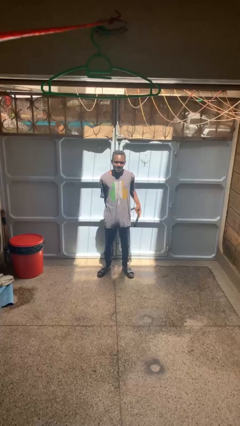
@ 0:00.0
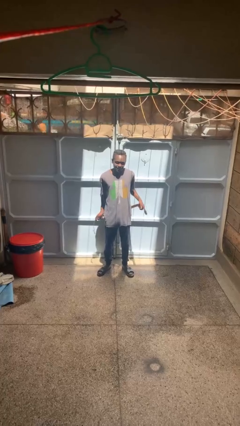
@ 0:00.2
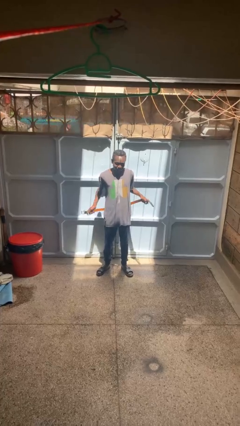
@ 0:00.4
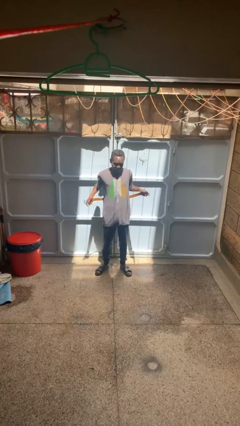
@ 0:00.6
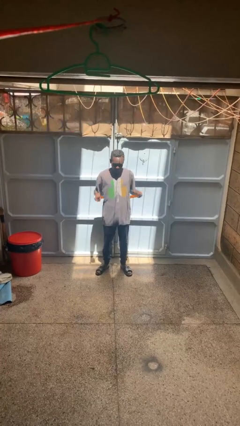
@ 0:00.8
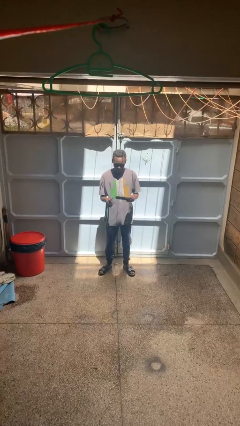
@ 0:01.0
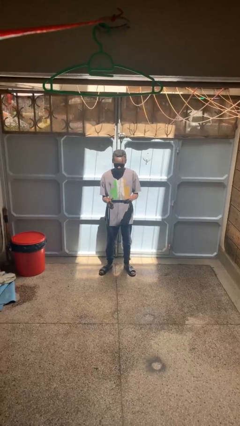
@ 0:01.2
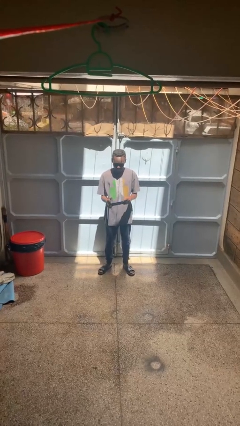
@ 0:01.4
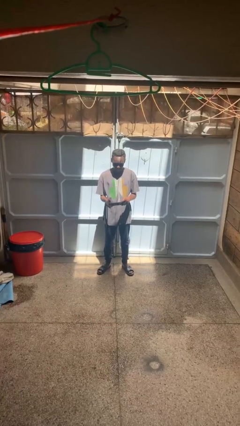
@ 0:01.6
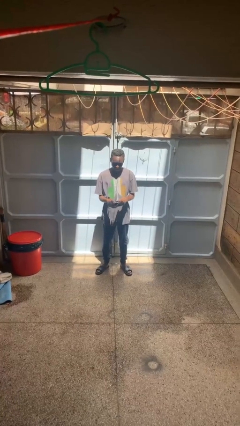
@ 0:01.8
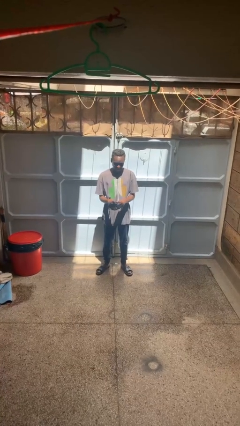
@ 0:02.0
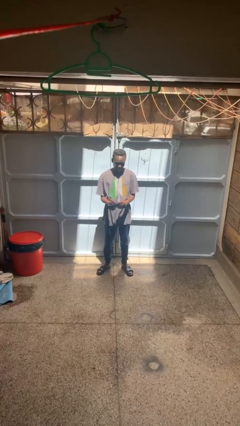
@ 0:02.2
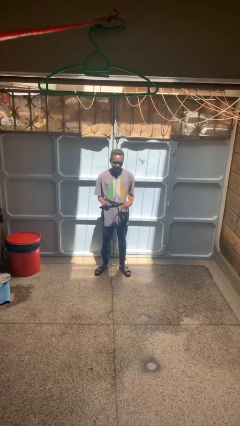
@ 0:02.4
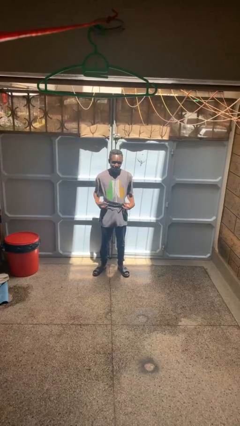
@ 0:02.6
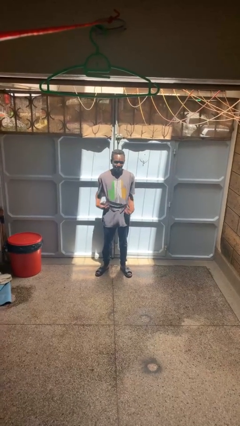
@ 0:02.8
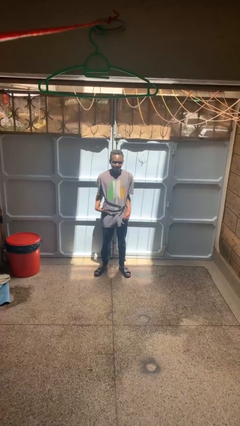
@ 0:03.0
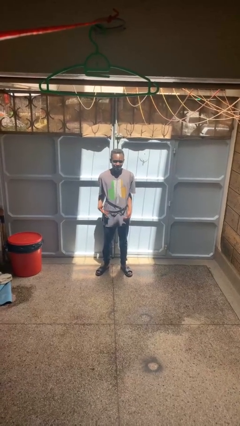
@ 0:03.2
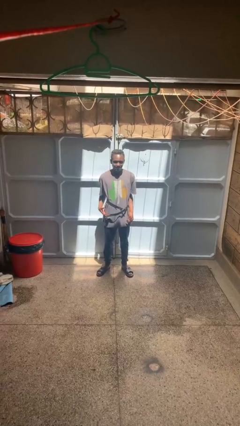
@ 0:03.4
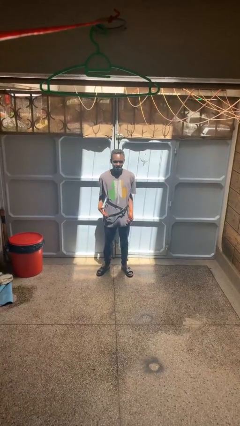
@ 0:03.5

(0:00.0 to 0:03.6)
person puts on belt

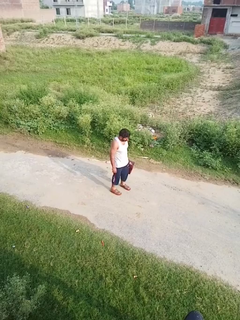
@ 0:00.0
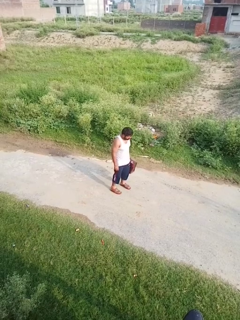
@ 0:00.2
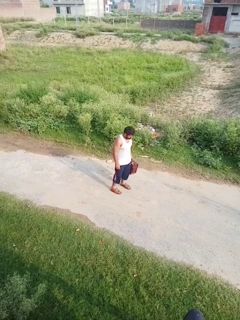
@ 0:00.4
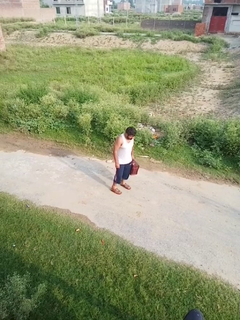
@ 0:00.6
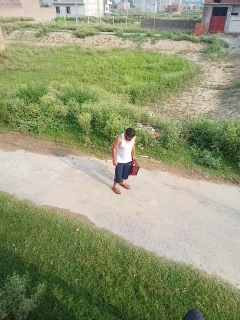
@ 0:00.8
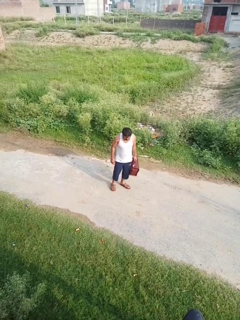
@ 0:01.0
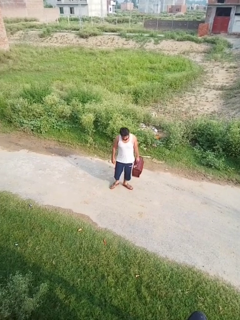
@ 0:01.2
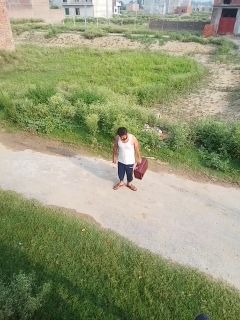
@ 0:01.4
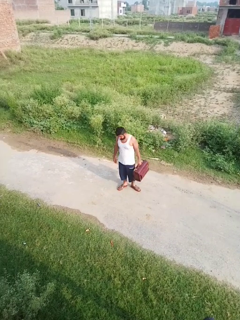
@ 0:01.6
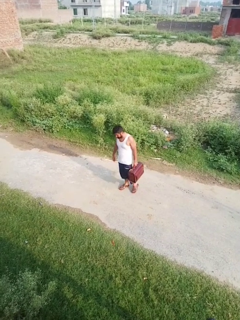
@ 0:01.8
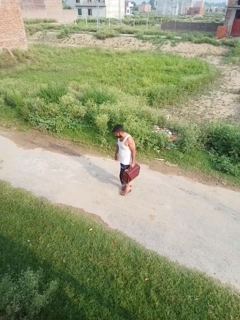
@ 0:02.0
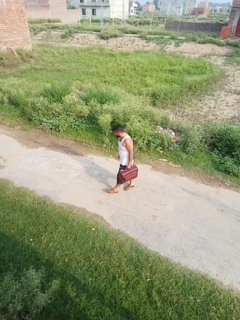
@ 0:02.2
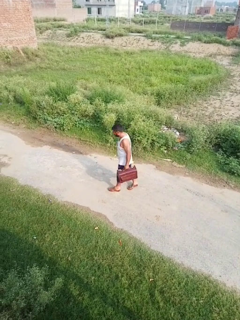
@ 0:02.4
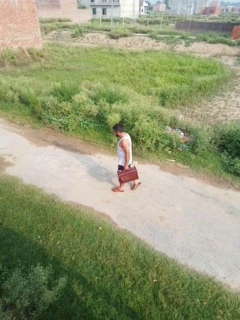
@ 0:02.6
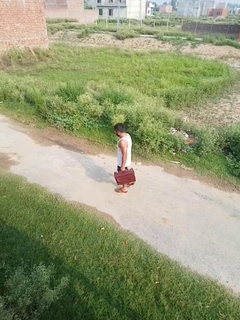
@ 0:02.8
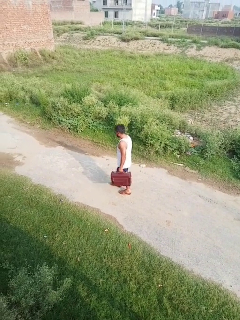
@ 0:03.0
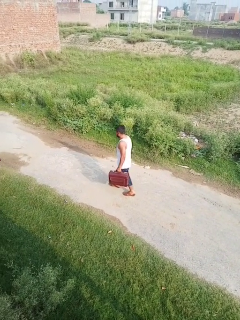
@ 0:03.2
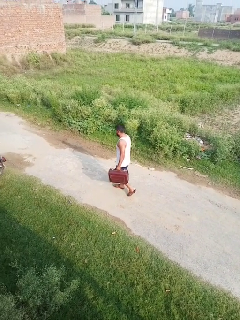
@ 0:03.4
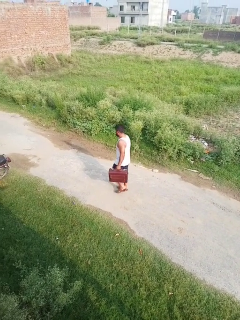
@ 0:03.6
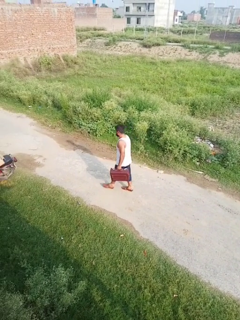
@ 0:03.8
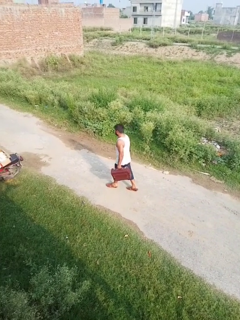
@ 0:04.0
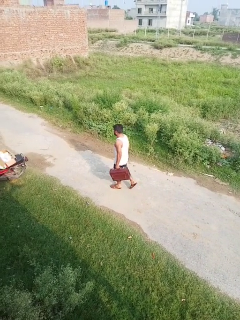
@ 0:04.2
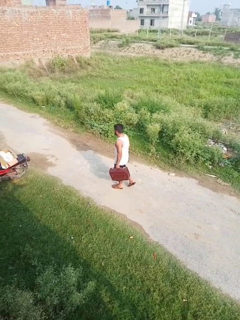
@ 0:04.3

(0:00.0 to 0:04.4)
person carries groceries

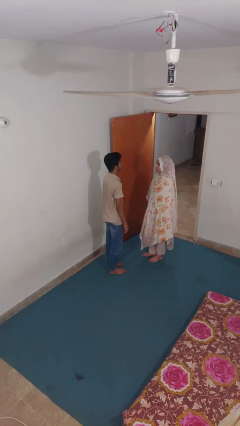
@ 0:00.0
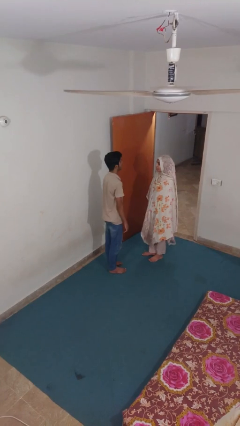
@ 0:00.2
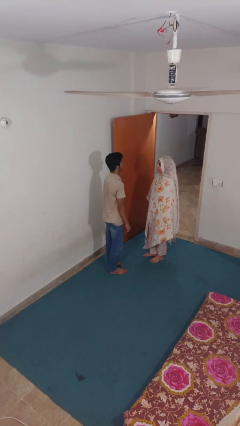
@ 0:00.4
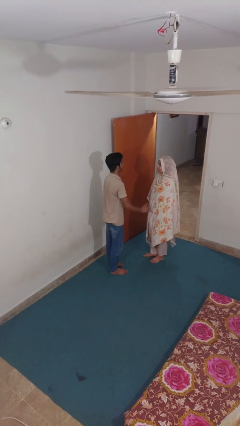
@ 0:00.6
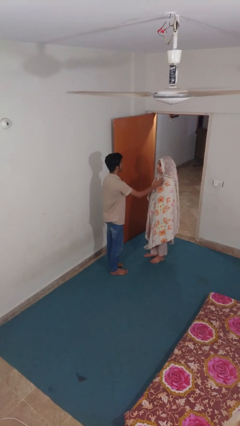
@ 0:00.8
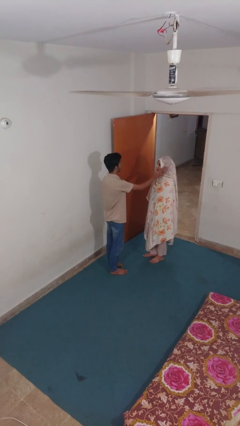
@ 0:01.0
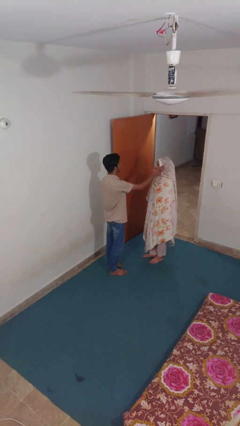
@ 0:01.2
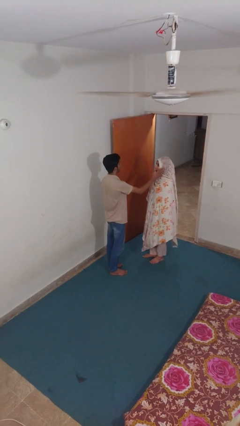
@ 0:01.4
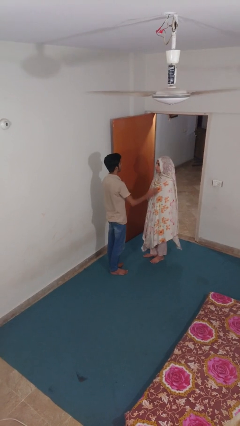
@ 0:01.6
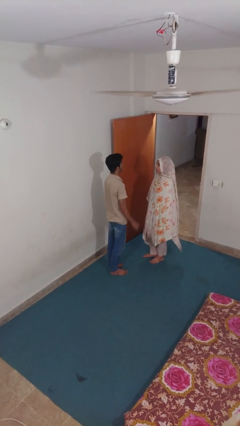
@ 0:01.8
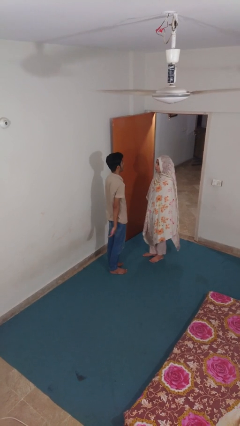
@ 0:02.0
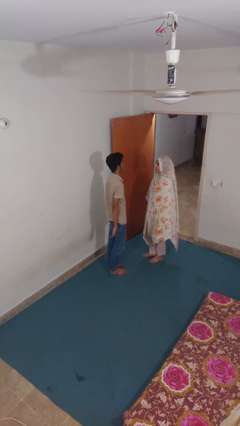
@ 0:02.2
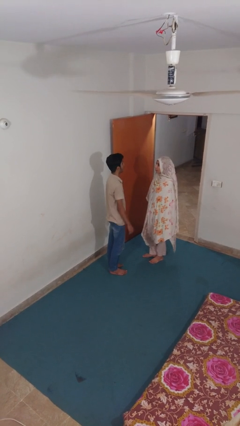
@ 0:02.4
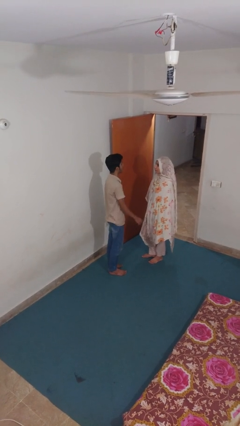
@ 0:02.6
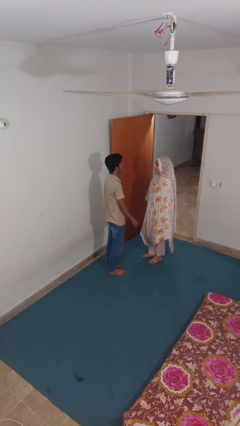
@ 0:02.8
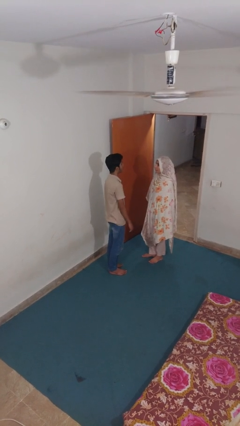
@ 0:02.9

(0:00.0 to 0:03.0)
person touches face of person

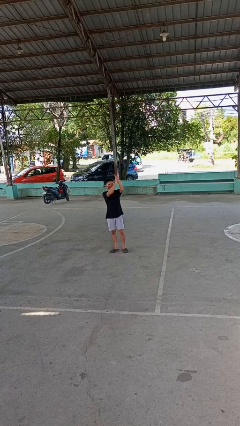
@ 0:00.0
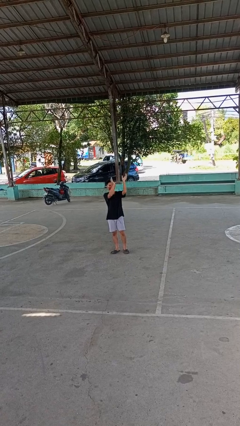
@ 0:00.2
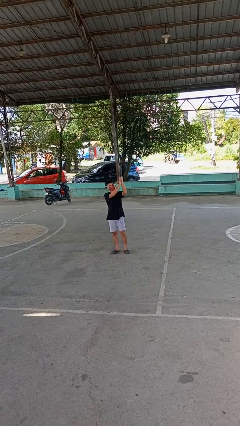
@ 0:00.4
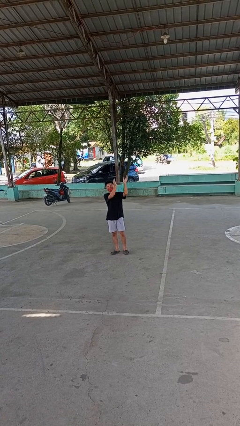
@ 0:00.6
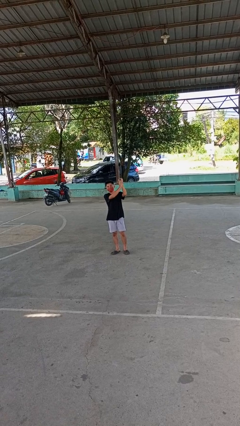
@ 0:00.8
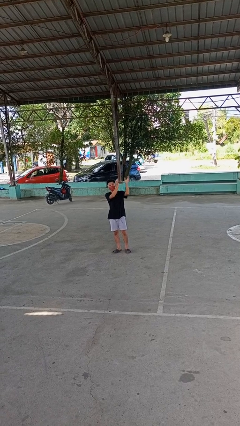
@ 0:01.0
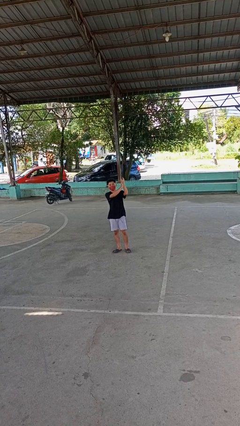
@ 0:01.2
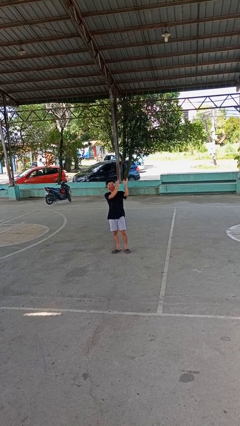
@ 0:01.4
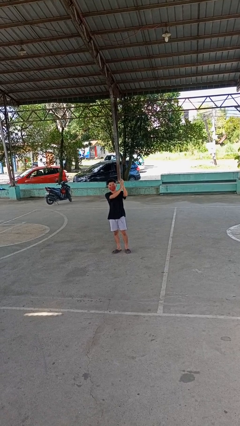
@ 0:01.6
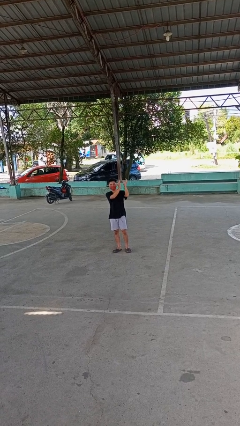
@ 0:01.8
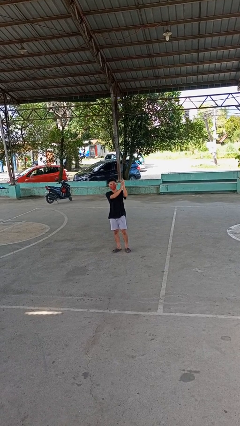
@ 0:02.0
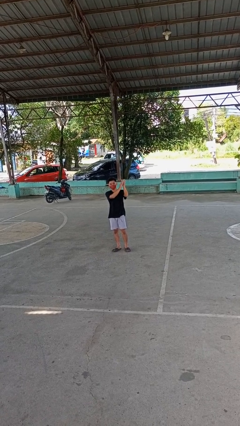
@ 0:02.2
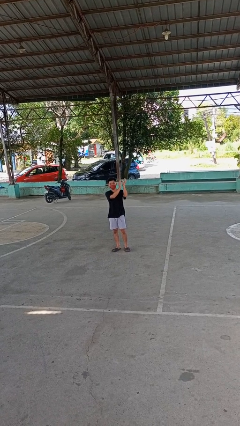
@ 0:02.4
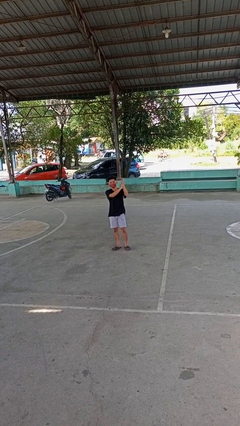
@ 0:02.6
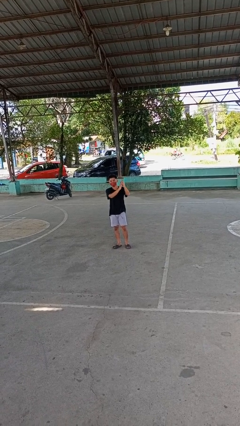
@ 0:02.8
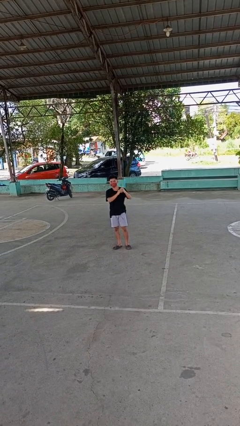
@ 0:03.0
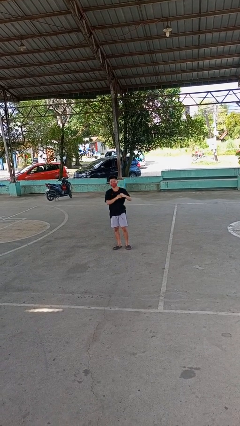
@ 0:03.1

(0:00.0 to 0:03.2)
person claps hands

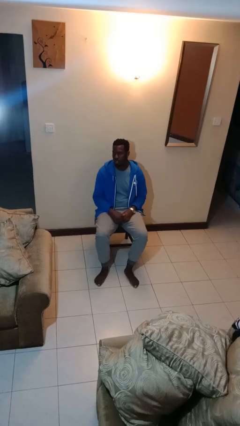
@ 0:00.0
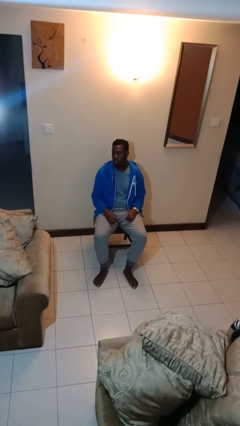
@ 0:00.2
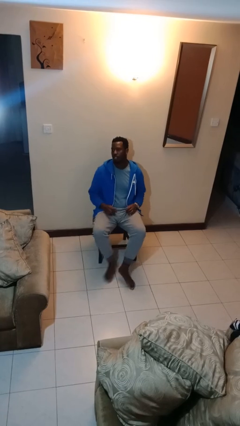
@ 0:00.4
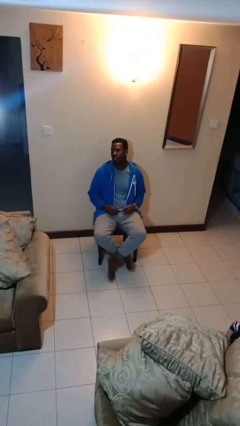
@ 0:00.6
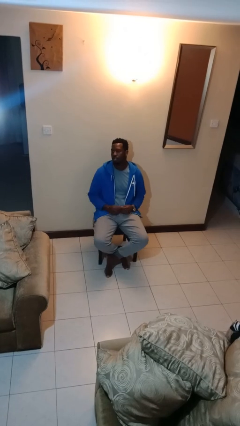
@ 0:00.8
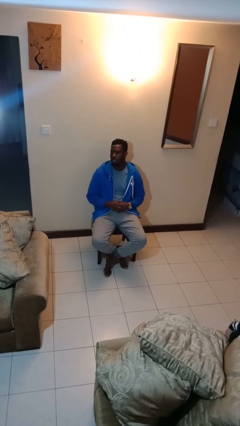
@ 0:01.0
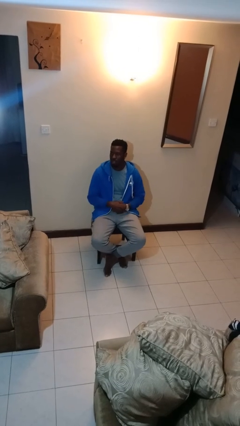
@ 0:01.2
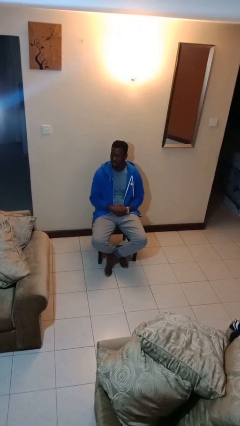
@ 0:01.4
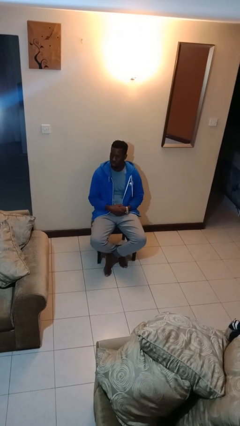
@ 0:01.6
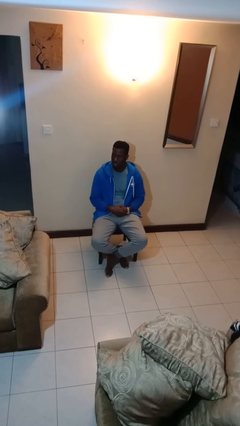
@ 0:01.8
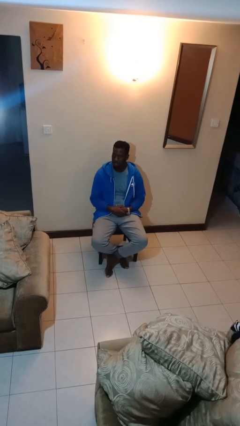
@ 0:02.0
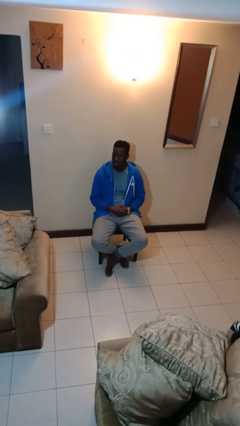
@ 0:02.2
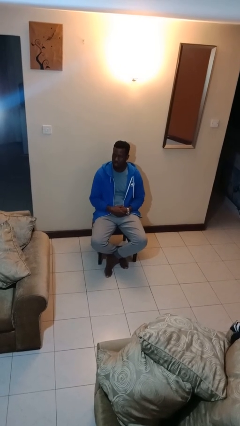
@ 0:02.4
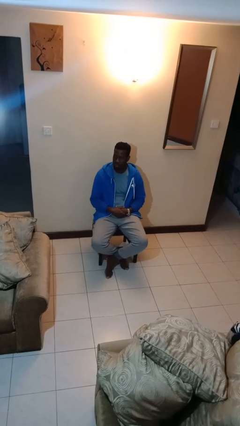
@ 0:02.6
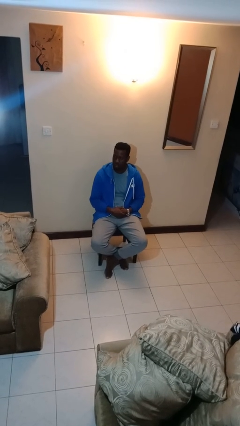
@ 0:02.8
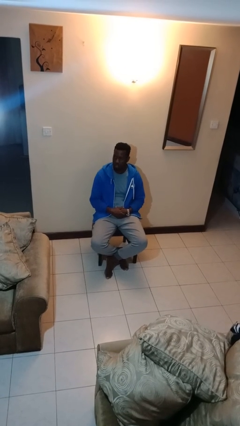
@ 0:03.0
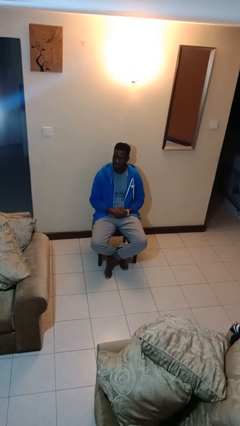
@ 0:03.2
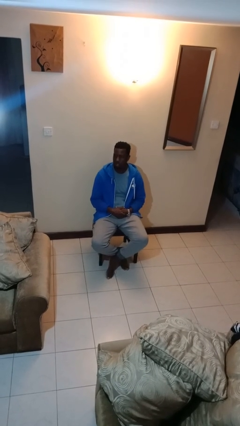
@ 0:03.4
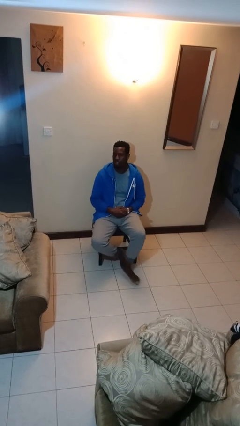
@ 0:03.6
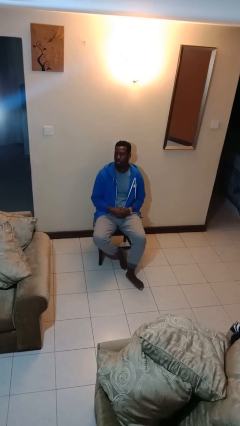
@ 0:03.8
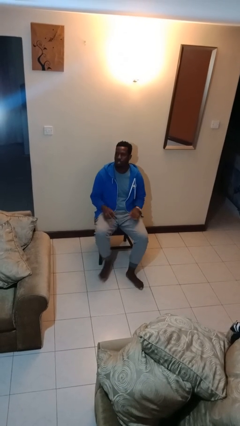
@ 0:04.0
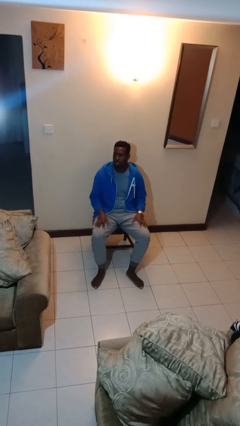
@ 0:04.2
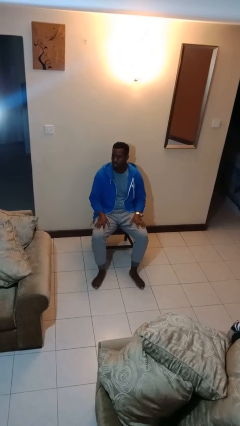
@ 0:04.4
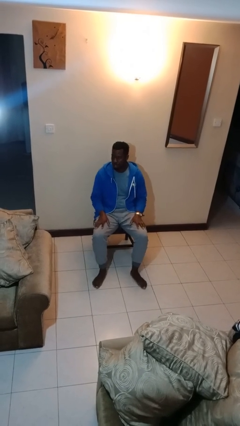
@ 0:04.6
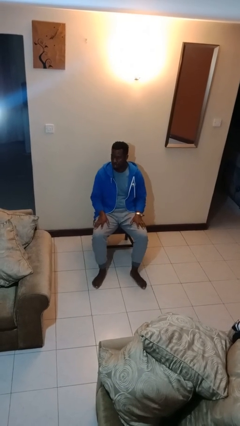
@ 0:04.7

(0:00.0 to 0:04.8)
person crosses legs
